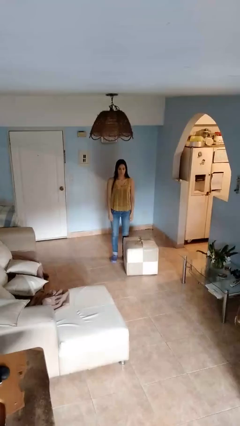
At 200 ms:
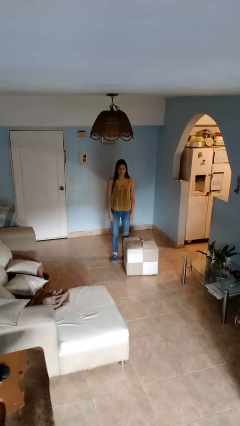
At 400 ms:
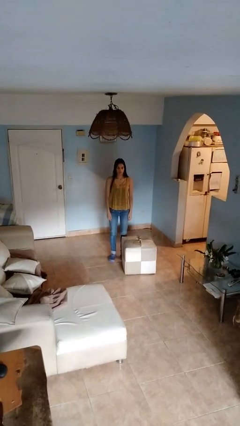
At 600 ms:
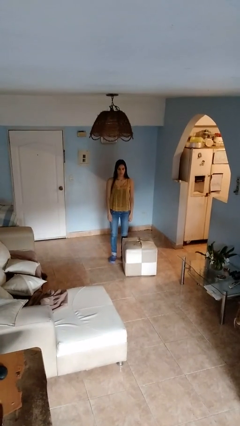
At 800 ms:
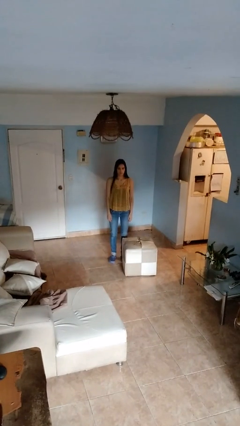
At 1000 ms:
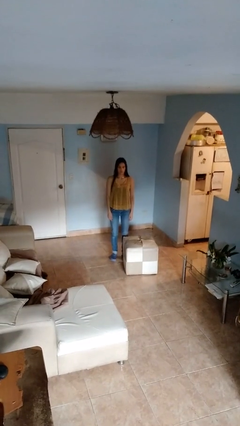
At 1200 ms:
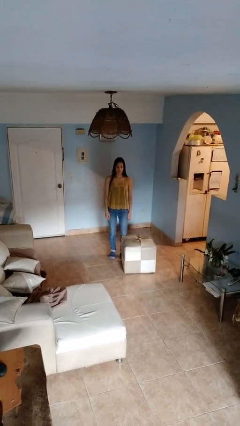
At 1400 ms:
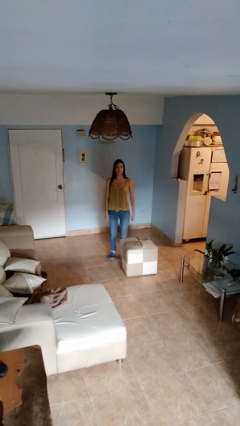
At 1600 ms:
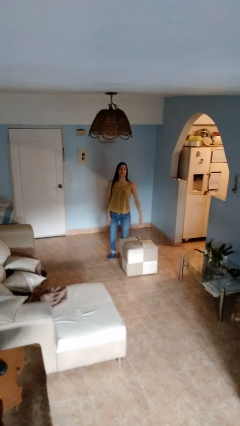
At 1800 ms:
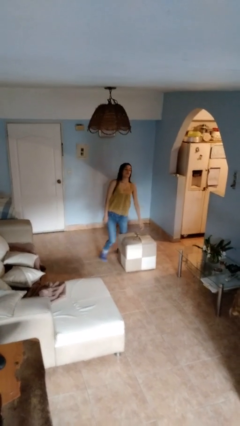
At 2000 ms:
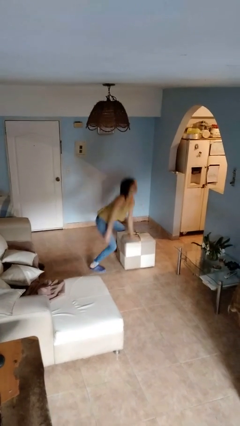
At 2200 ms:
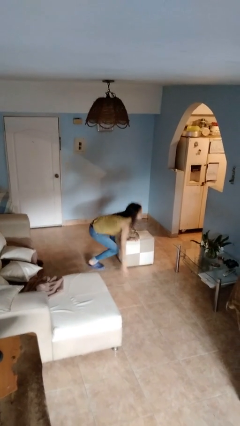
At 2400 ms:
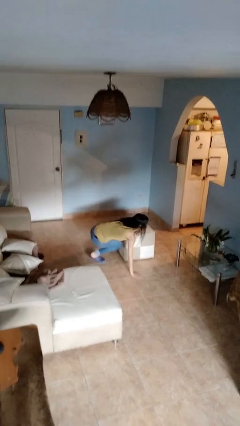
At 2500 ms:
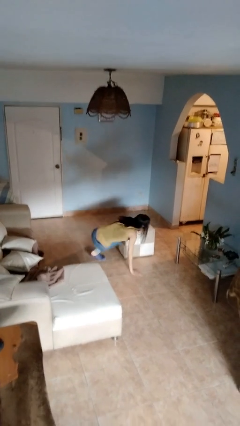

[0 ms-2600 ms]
person trips on object on floor

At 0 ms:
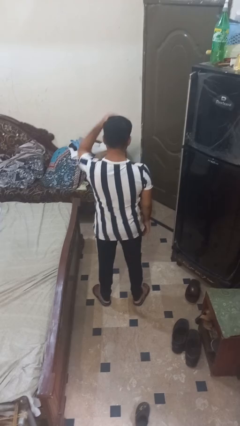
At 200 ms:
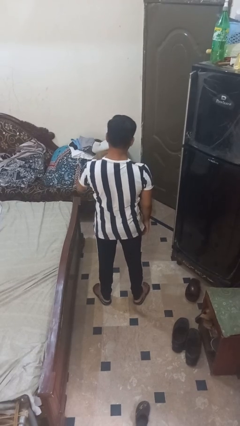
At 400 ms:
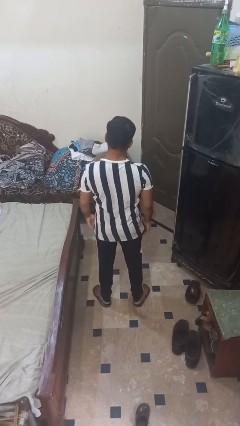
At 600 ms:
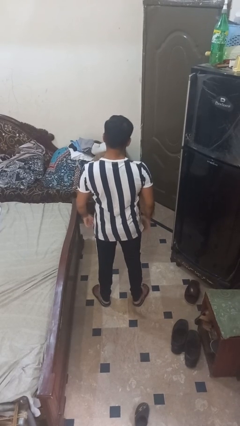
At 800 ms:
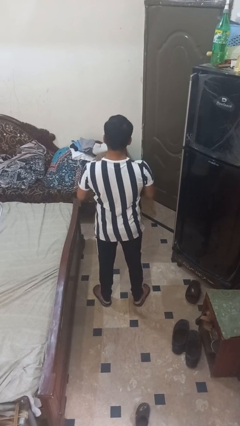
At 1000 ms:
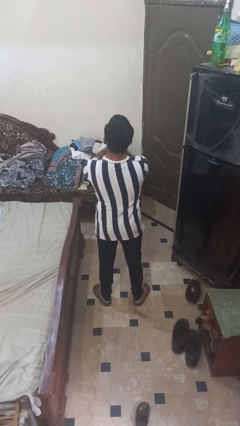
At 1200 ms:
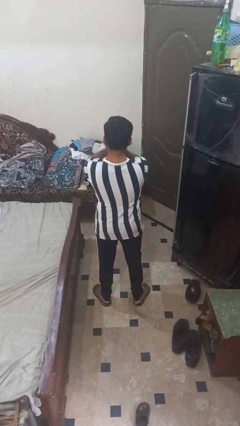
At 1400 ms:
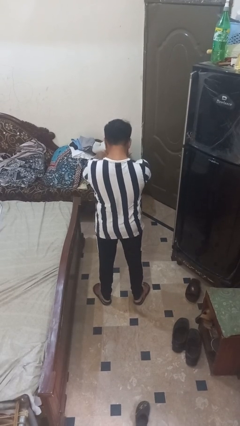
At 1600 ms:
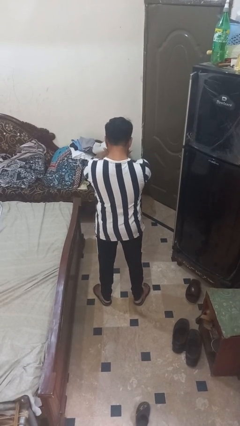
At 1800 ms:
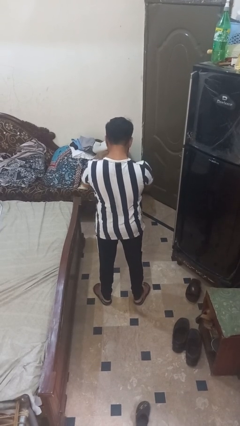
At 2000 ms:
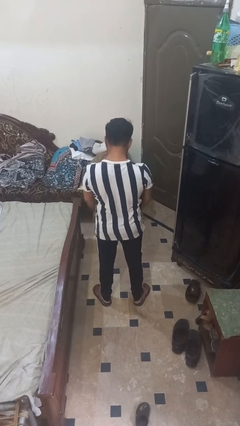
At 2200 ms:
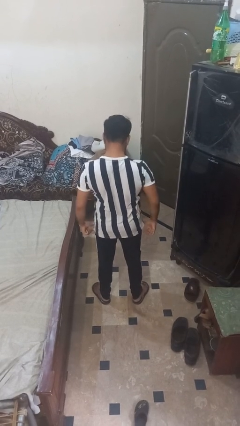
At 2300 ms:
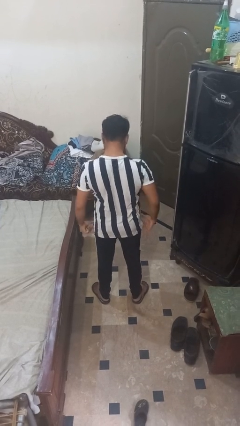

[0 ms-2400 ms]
person sneezes into hand

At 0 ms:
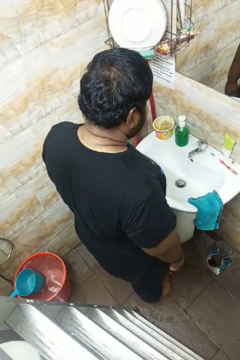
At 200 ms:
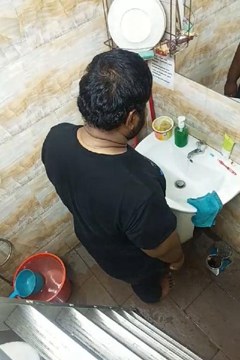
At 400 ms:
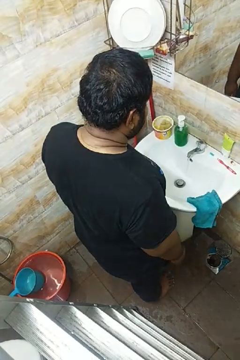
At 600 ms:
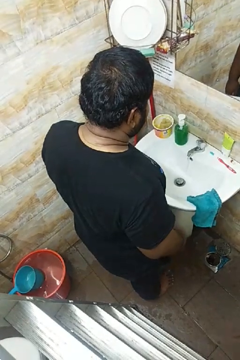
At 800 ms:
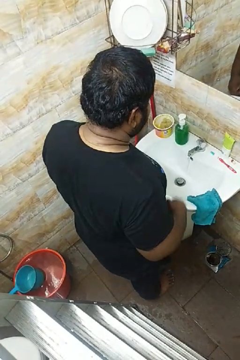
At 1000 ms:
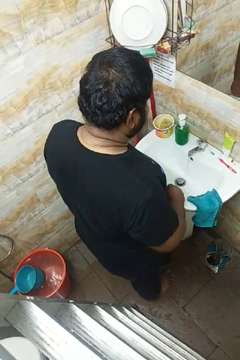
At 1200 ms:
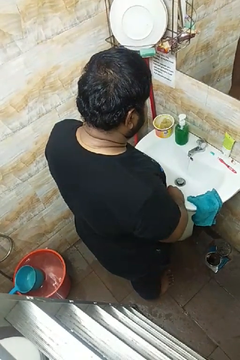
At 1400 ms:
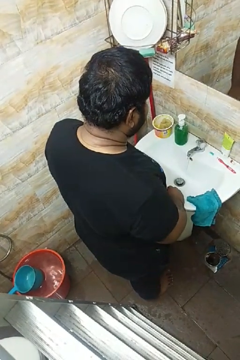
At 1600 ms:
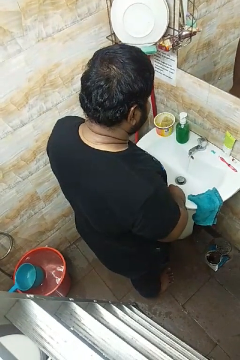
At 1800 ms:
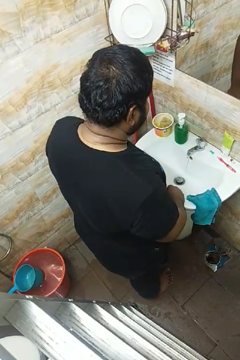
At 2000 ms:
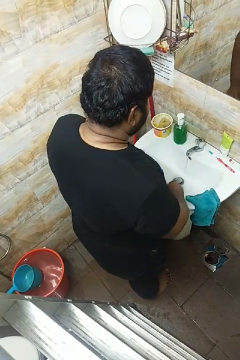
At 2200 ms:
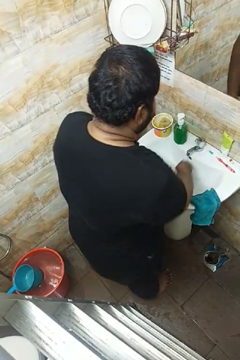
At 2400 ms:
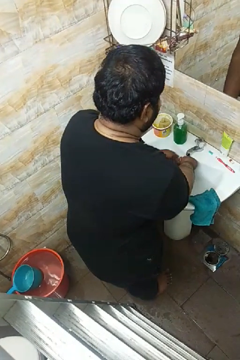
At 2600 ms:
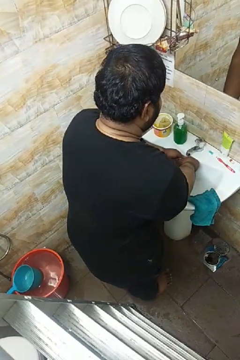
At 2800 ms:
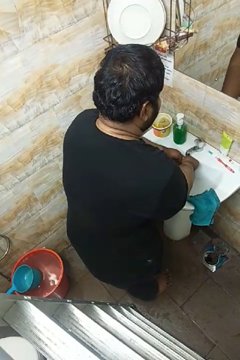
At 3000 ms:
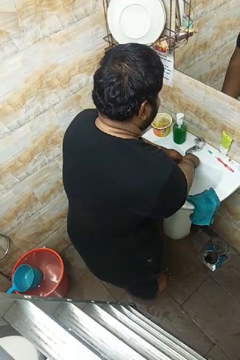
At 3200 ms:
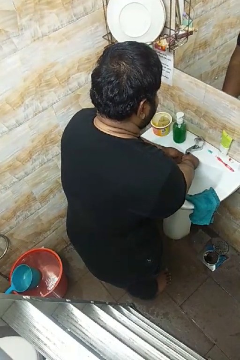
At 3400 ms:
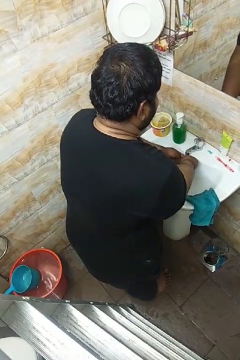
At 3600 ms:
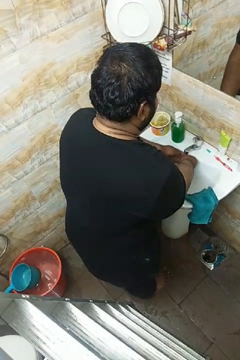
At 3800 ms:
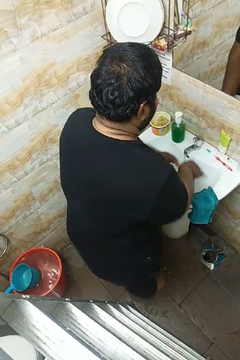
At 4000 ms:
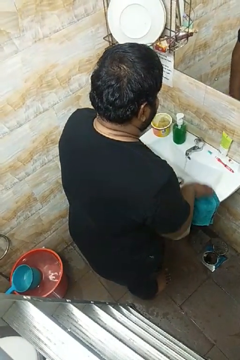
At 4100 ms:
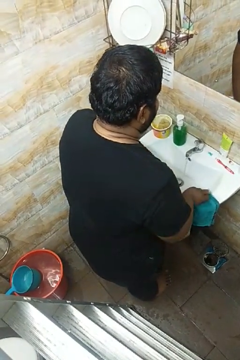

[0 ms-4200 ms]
person washes hands

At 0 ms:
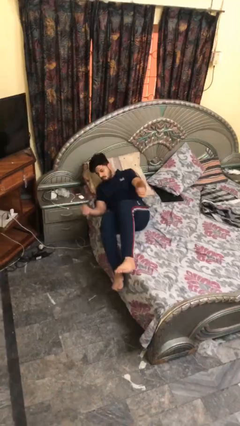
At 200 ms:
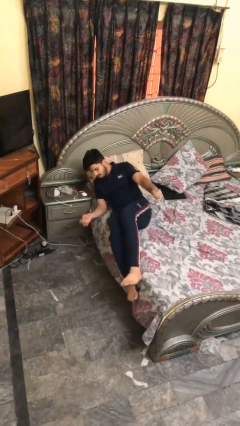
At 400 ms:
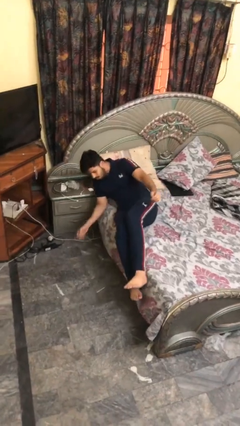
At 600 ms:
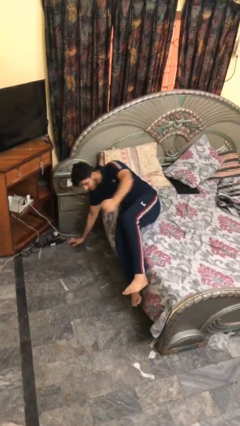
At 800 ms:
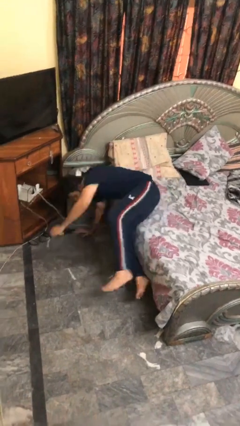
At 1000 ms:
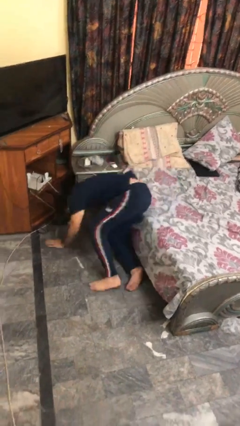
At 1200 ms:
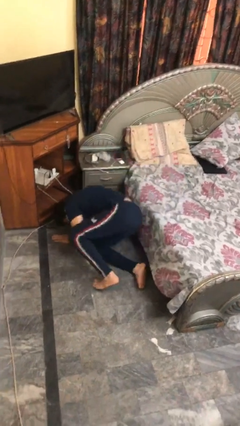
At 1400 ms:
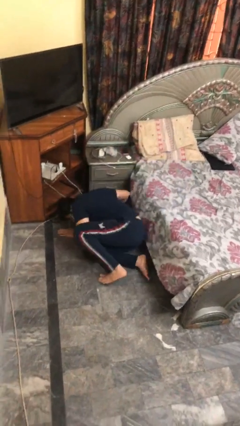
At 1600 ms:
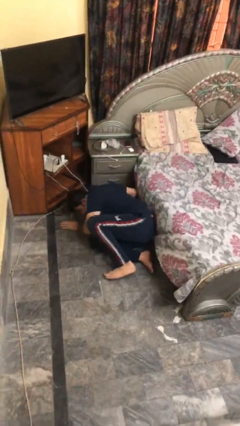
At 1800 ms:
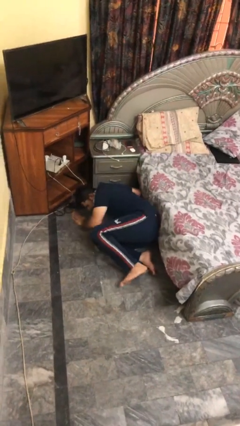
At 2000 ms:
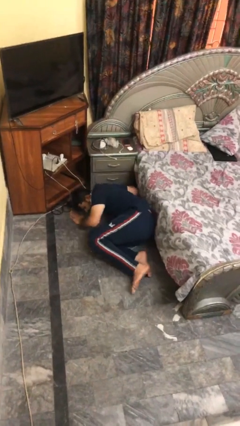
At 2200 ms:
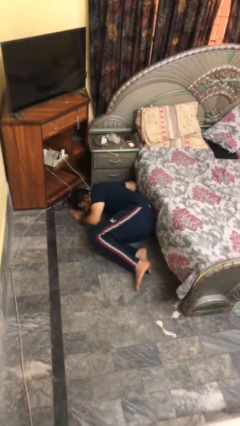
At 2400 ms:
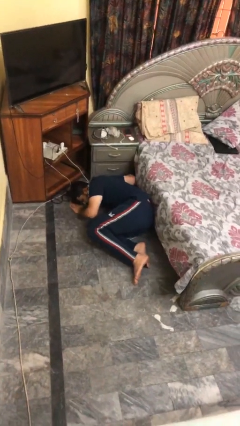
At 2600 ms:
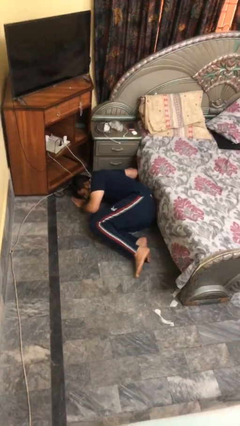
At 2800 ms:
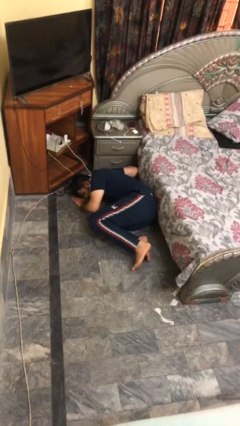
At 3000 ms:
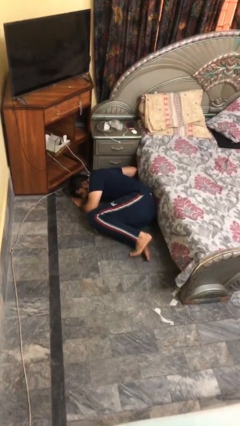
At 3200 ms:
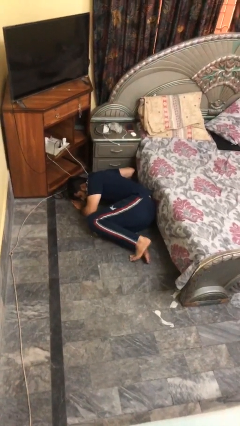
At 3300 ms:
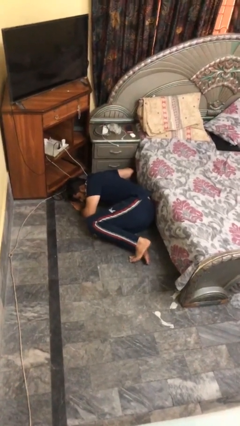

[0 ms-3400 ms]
person falls from bed

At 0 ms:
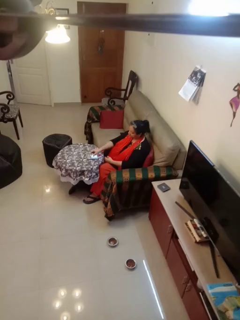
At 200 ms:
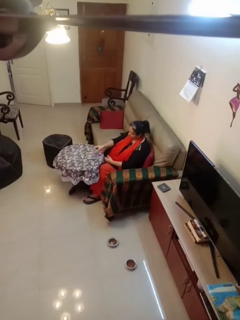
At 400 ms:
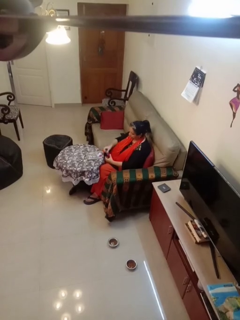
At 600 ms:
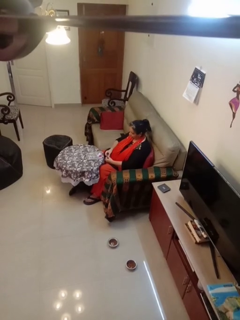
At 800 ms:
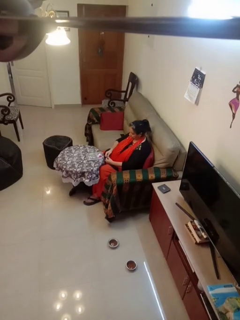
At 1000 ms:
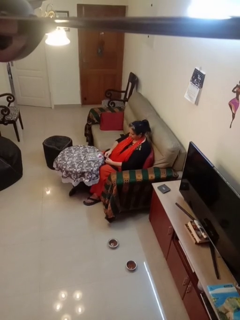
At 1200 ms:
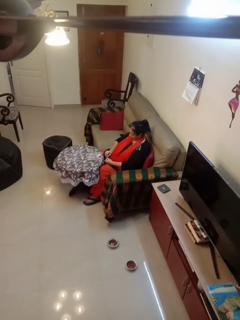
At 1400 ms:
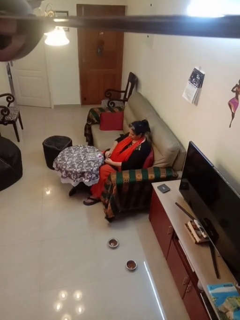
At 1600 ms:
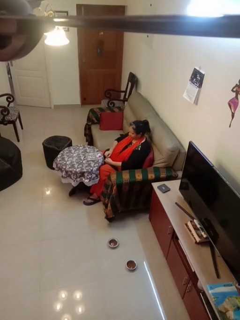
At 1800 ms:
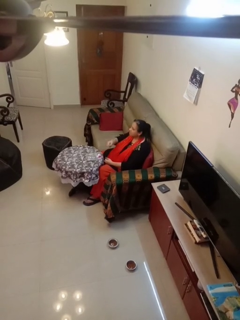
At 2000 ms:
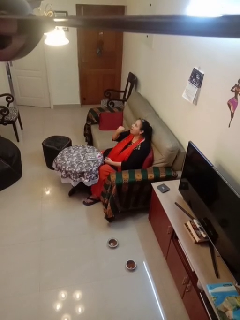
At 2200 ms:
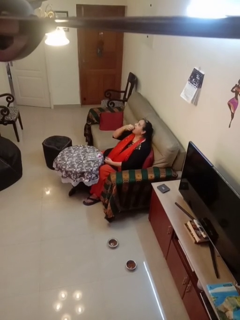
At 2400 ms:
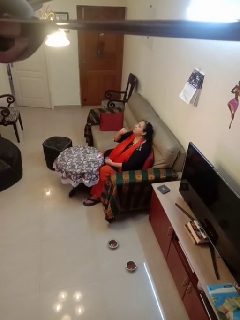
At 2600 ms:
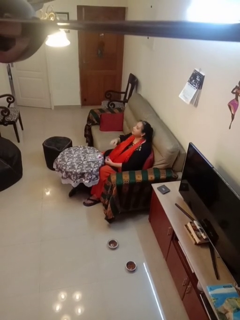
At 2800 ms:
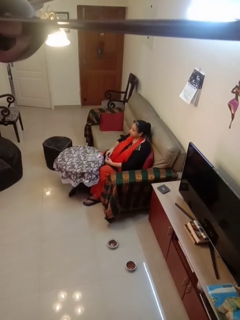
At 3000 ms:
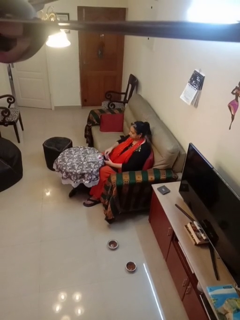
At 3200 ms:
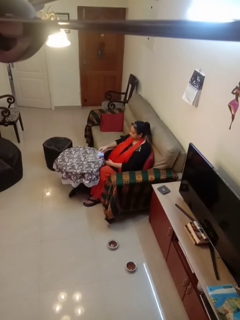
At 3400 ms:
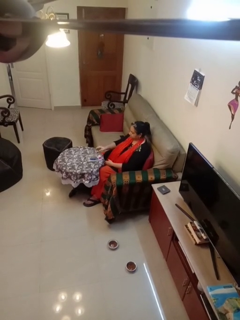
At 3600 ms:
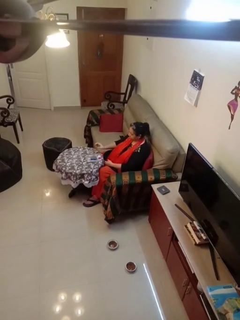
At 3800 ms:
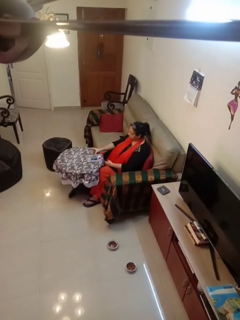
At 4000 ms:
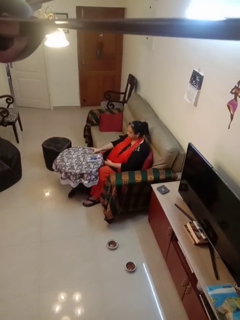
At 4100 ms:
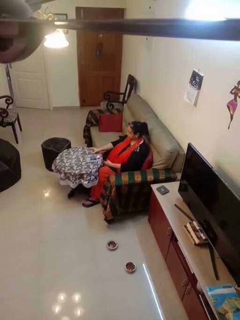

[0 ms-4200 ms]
person takes medicine pills

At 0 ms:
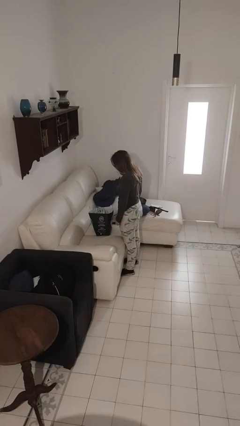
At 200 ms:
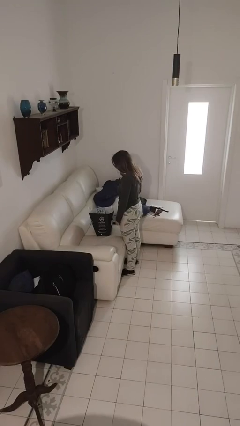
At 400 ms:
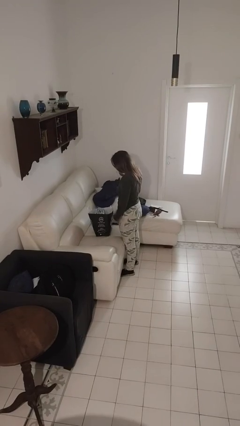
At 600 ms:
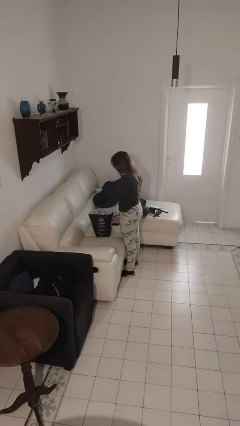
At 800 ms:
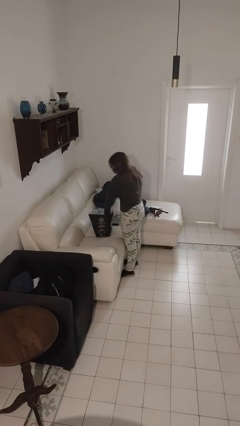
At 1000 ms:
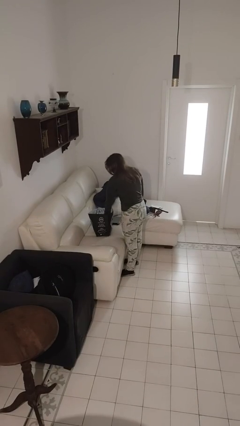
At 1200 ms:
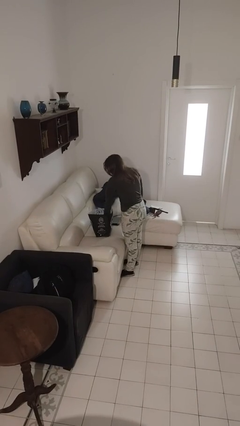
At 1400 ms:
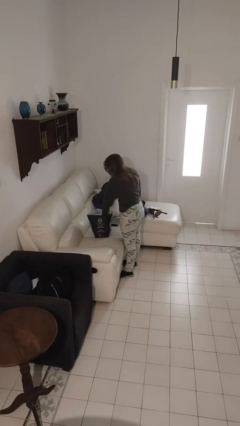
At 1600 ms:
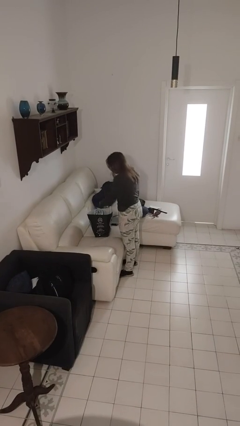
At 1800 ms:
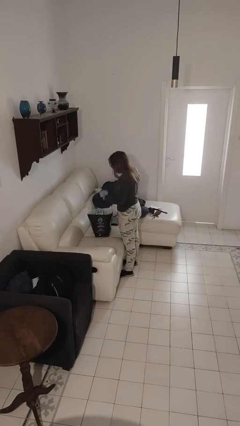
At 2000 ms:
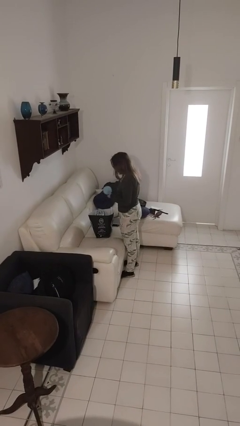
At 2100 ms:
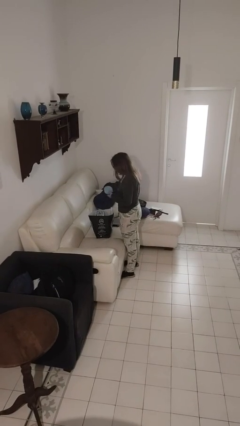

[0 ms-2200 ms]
person takes object from bag
